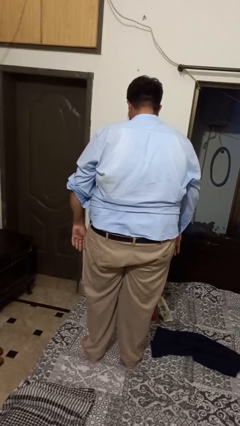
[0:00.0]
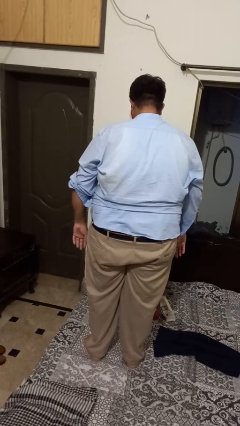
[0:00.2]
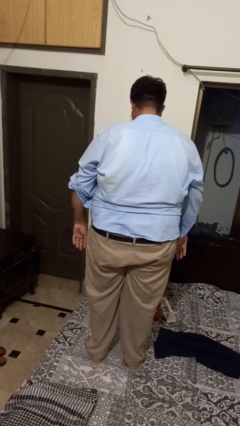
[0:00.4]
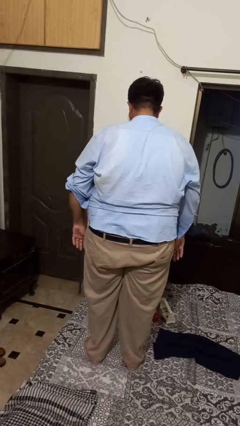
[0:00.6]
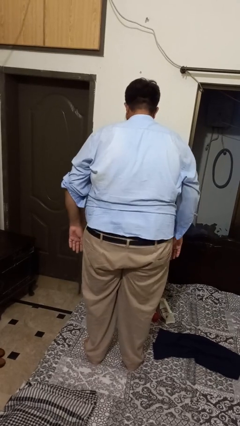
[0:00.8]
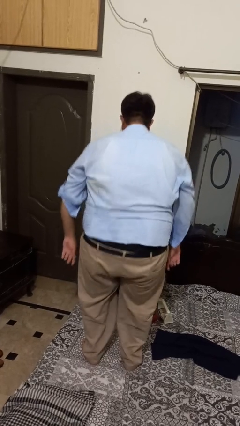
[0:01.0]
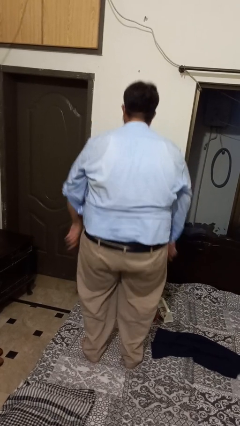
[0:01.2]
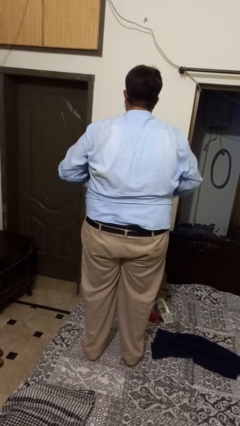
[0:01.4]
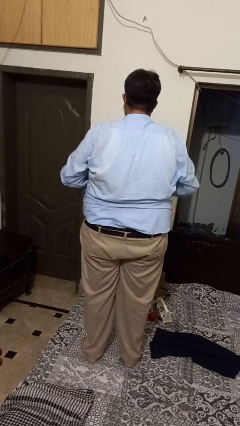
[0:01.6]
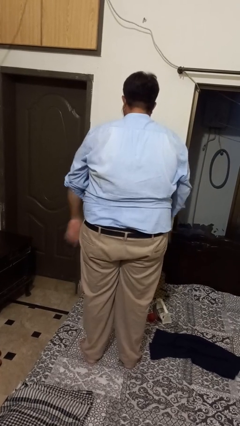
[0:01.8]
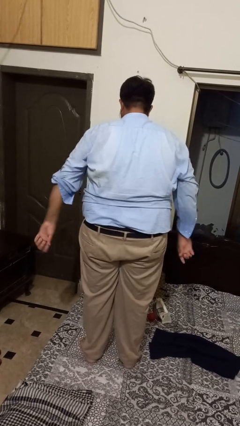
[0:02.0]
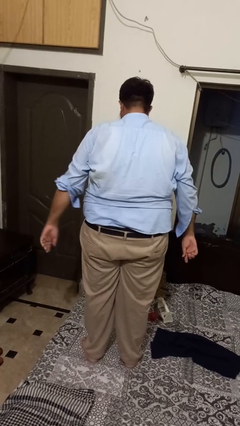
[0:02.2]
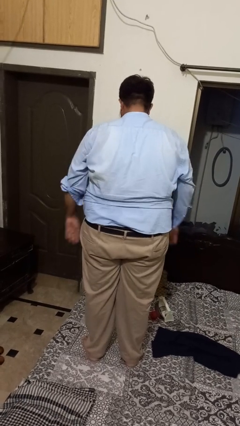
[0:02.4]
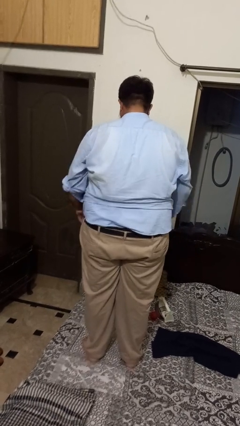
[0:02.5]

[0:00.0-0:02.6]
person jumps on bed

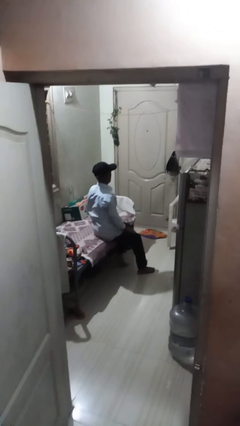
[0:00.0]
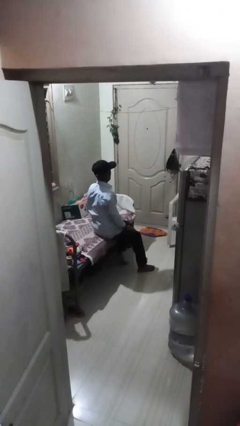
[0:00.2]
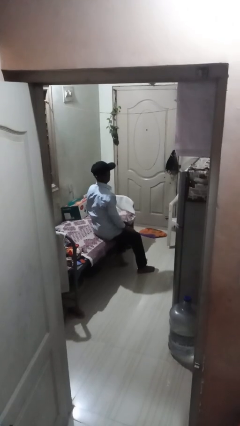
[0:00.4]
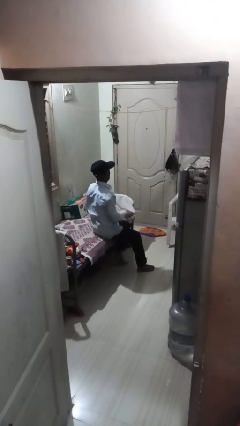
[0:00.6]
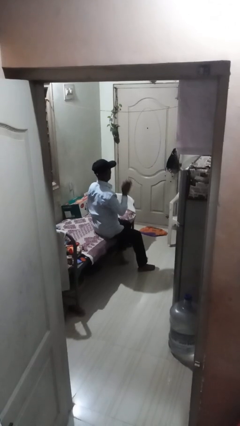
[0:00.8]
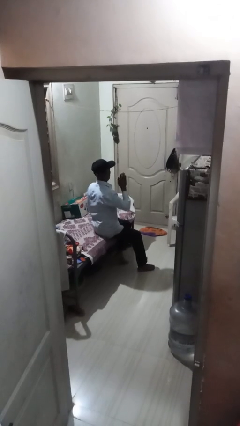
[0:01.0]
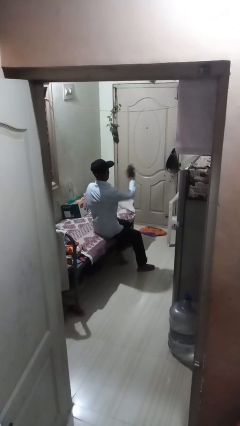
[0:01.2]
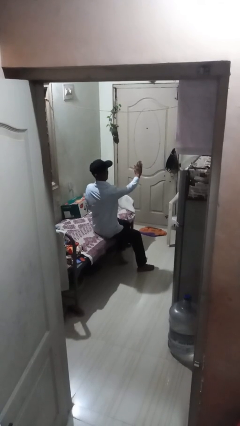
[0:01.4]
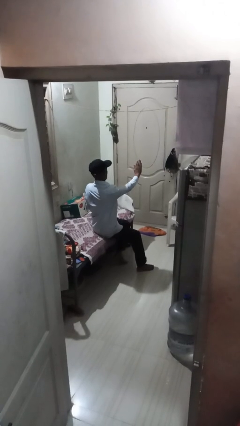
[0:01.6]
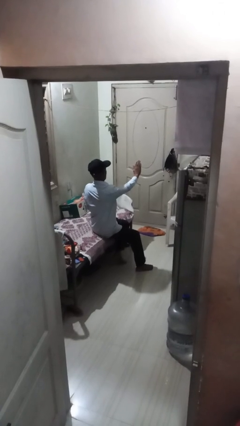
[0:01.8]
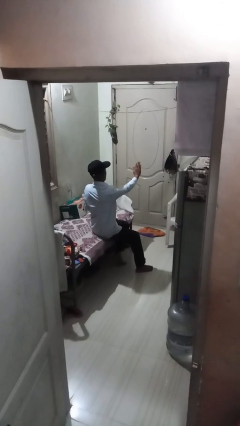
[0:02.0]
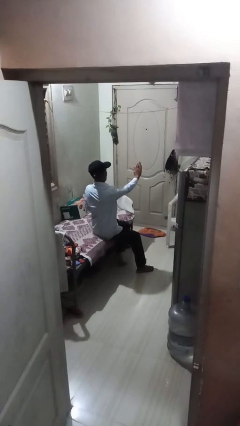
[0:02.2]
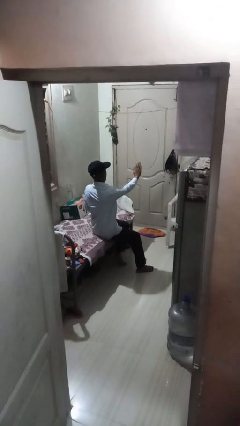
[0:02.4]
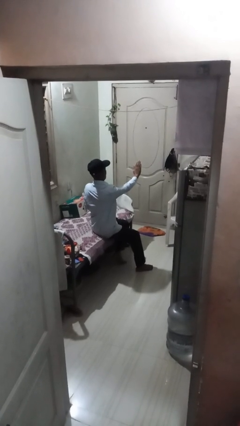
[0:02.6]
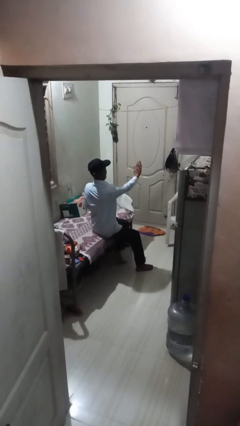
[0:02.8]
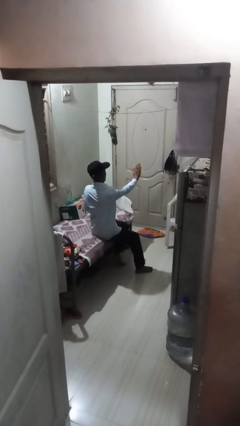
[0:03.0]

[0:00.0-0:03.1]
person gestures stop

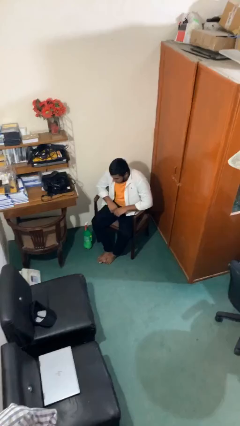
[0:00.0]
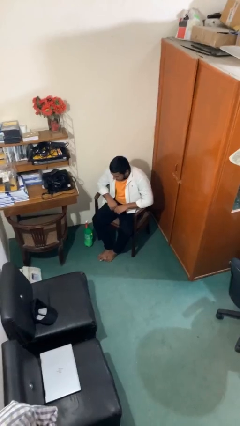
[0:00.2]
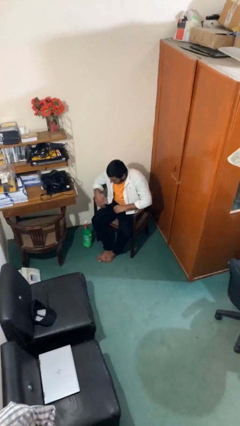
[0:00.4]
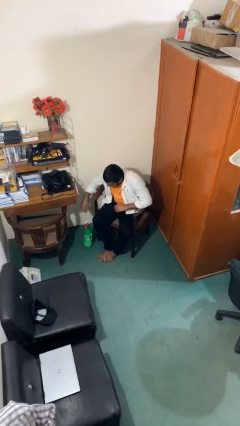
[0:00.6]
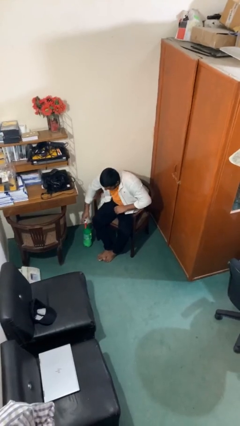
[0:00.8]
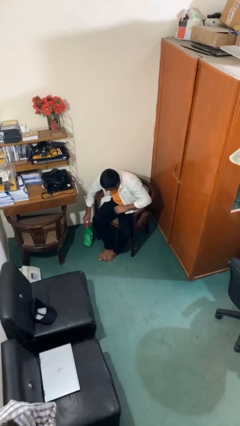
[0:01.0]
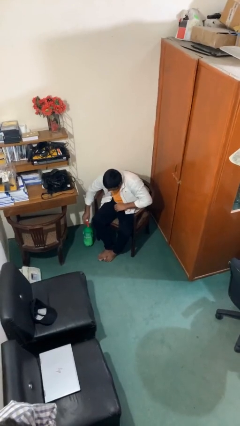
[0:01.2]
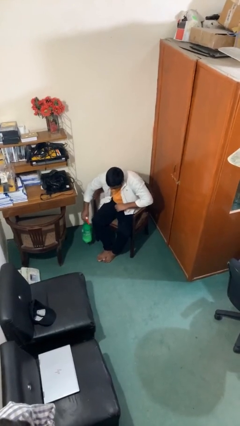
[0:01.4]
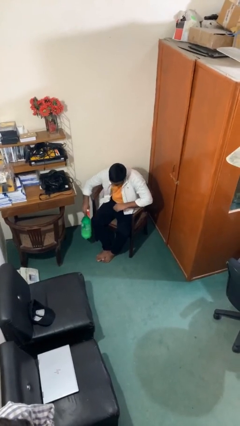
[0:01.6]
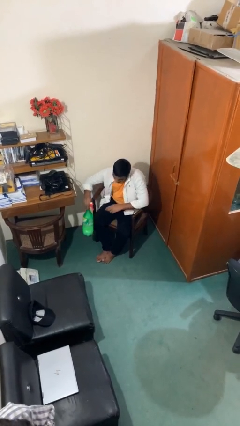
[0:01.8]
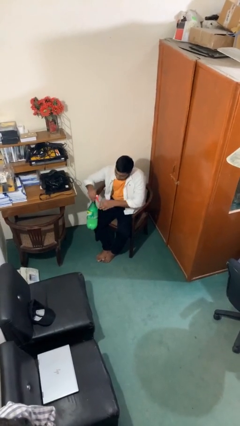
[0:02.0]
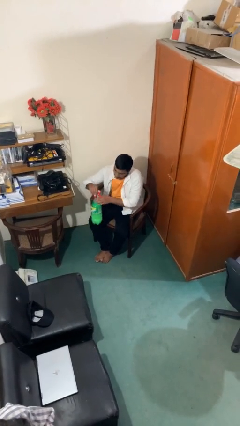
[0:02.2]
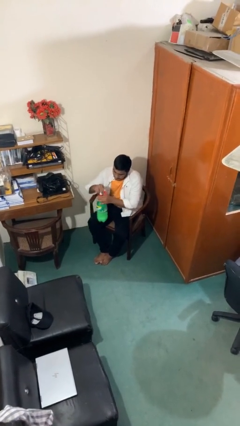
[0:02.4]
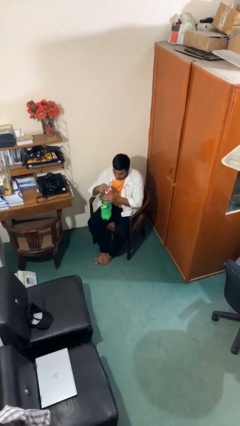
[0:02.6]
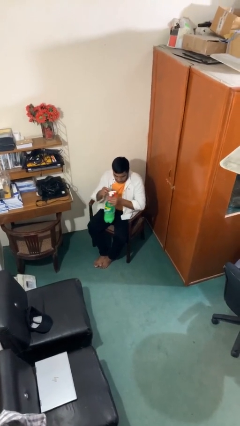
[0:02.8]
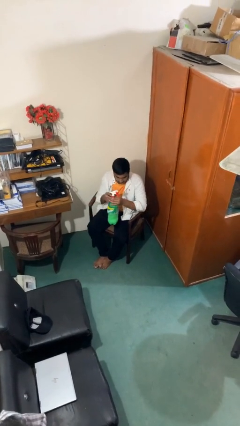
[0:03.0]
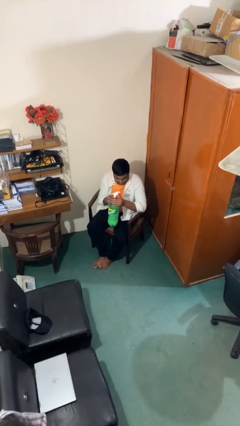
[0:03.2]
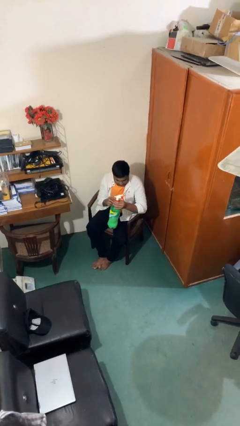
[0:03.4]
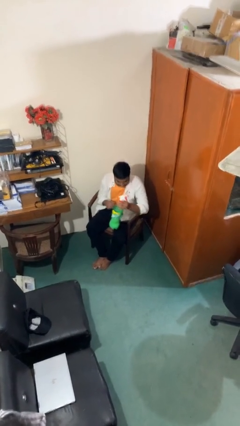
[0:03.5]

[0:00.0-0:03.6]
person picks up object from floor

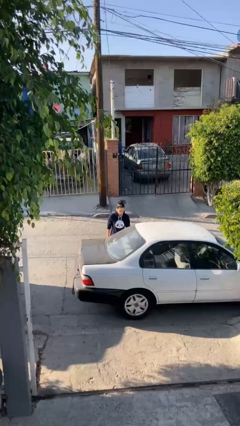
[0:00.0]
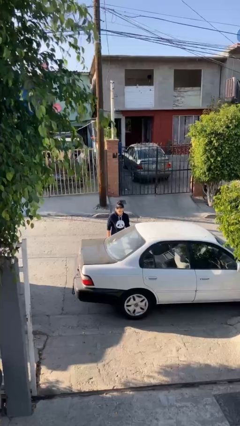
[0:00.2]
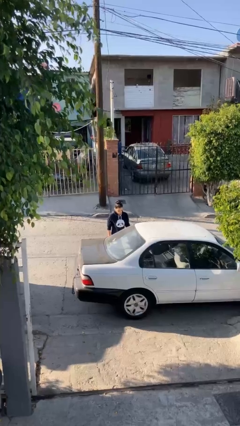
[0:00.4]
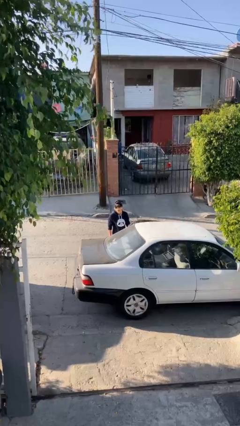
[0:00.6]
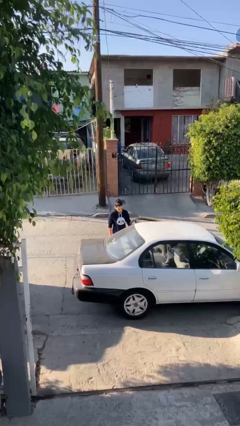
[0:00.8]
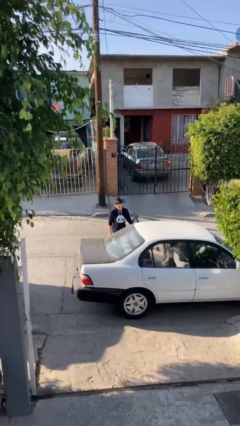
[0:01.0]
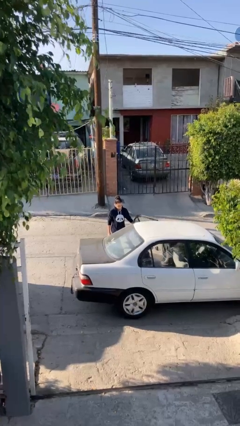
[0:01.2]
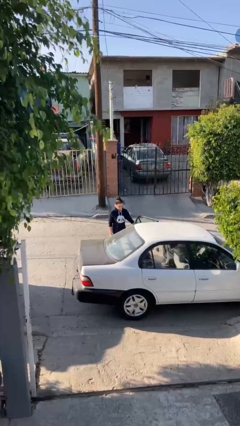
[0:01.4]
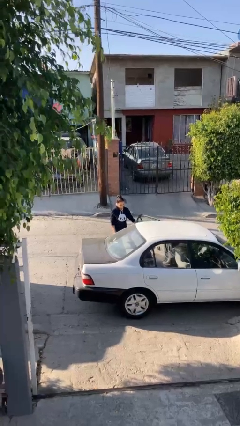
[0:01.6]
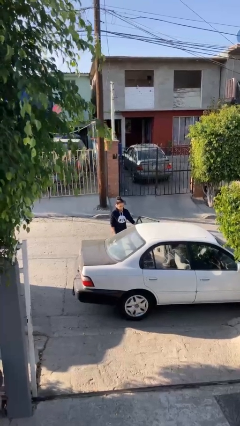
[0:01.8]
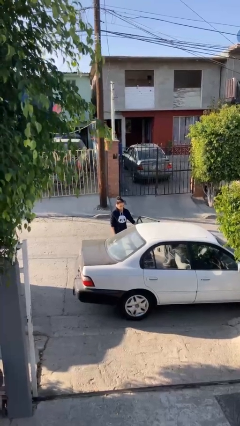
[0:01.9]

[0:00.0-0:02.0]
person opens car door

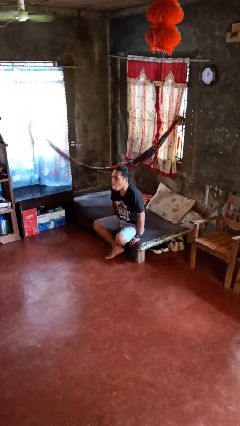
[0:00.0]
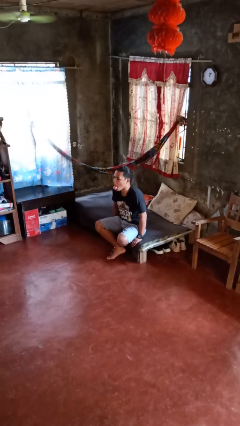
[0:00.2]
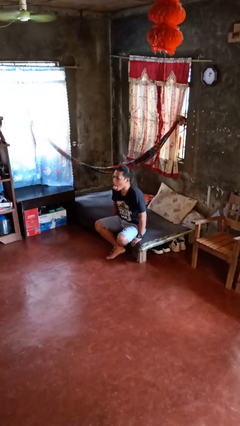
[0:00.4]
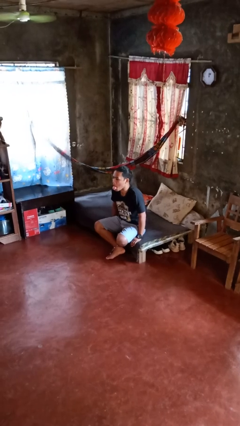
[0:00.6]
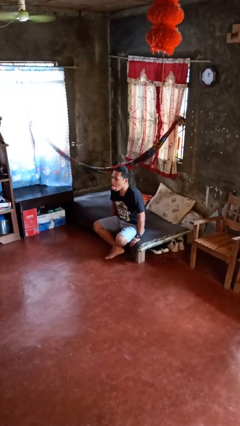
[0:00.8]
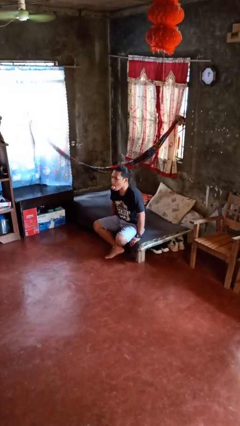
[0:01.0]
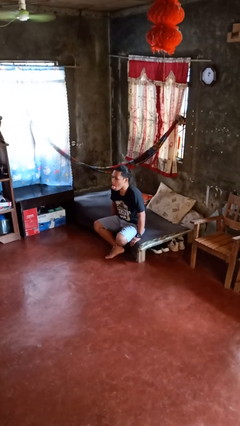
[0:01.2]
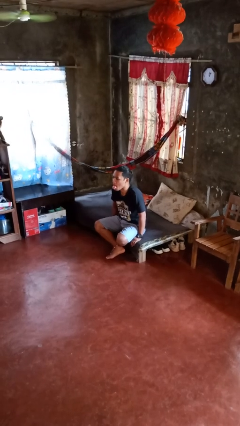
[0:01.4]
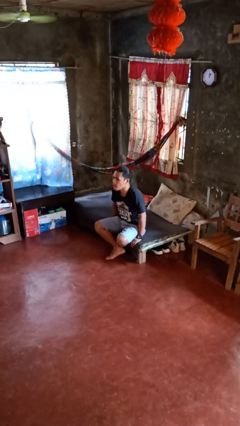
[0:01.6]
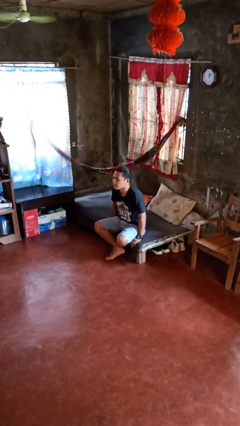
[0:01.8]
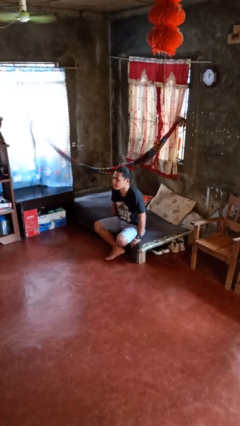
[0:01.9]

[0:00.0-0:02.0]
person sticks out tongue

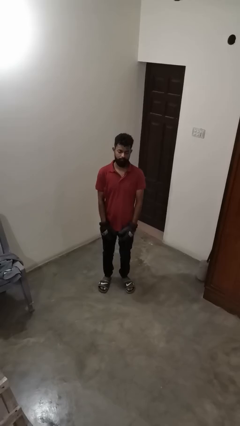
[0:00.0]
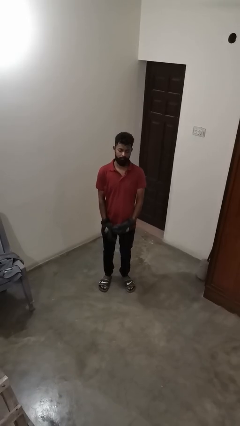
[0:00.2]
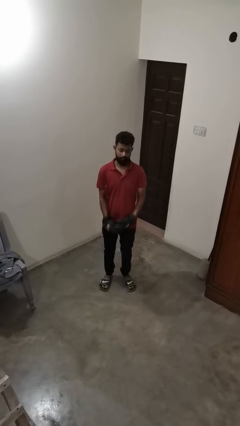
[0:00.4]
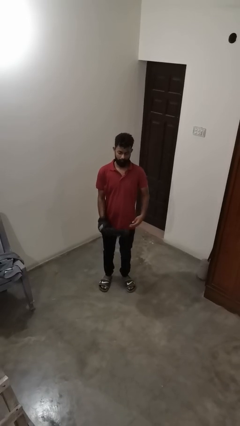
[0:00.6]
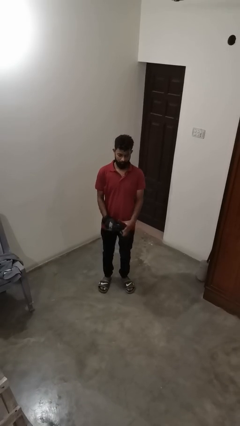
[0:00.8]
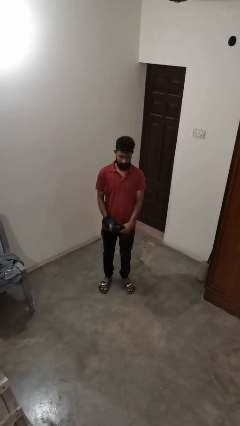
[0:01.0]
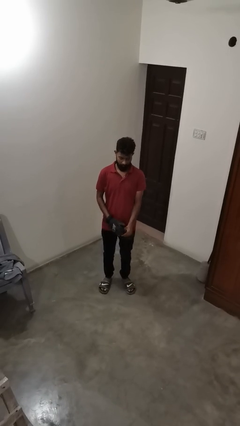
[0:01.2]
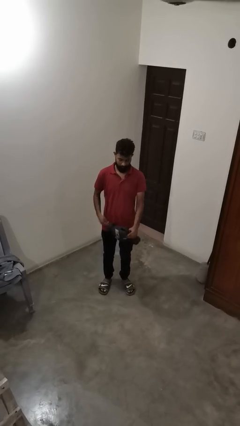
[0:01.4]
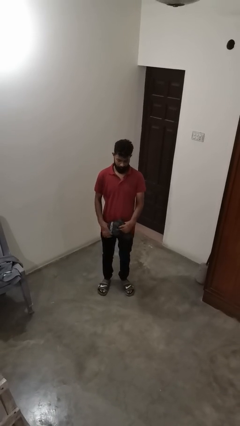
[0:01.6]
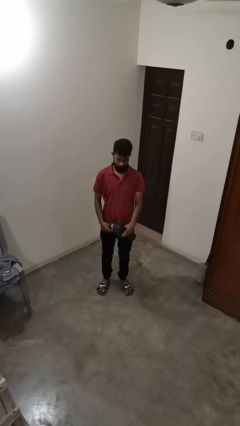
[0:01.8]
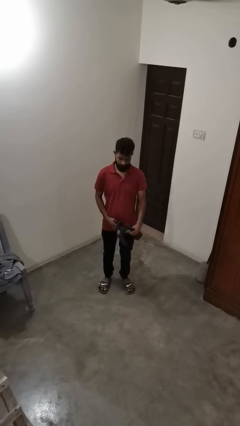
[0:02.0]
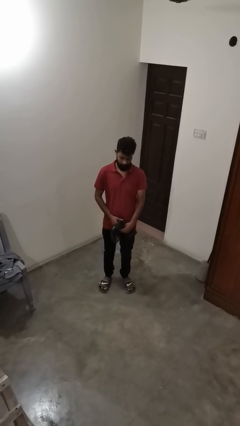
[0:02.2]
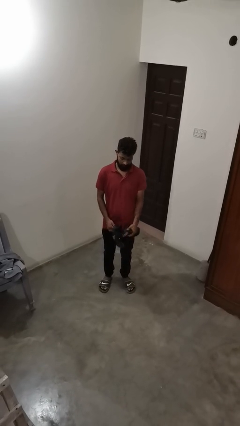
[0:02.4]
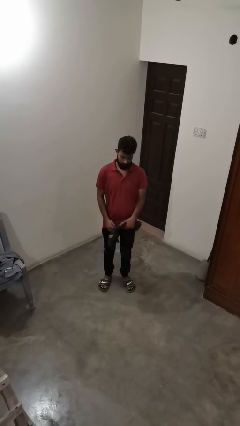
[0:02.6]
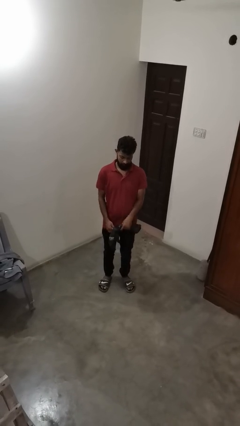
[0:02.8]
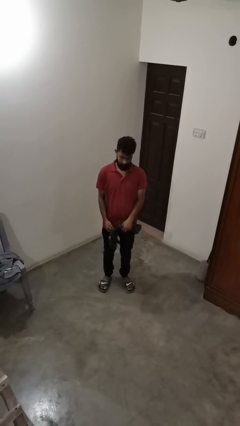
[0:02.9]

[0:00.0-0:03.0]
person takes off gloves

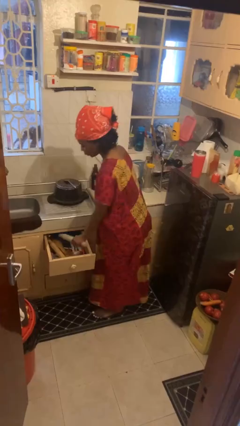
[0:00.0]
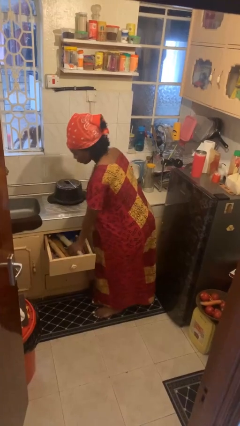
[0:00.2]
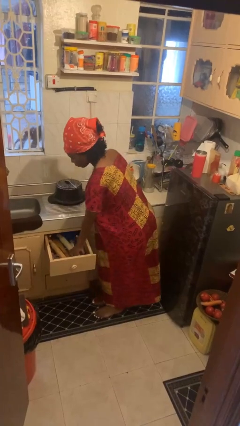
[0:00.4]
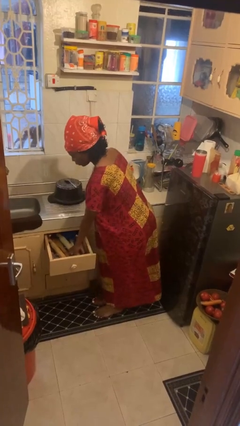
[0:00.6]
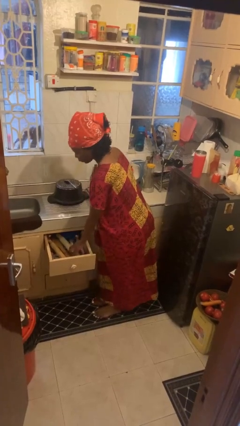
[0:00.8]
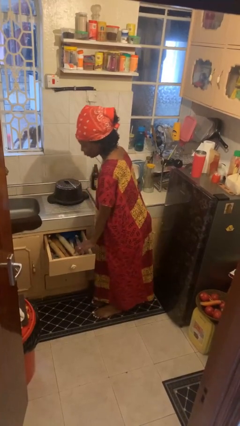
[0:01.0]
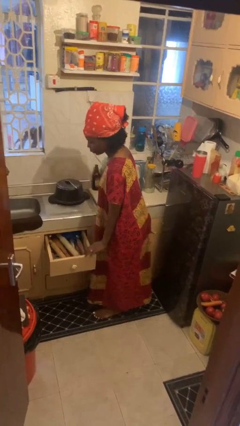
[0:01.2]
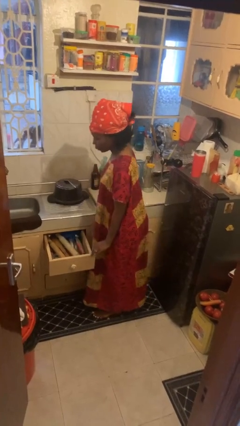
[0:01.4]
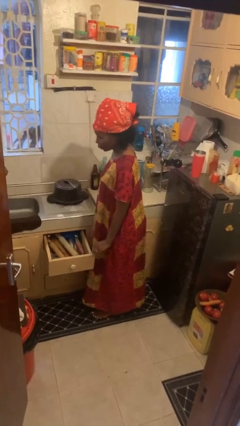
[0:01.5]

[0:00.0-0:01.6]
person puts object into kitchen drawer
